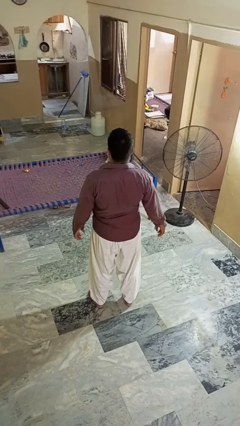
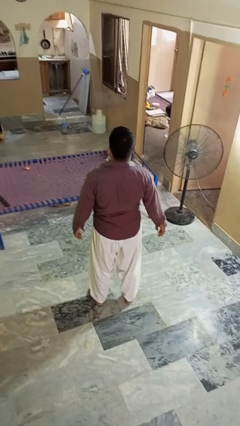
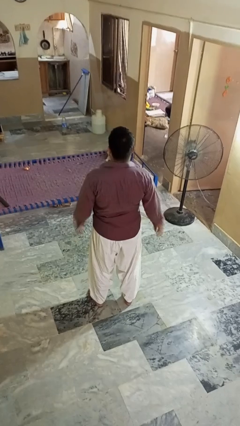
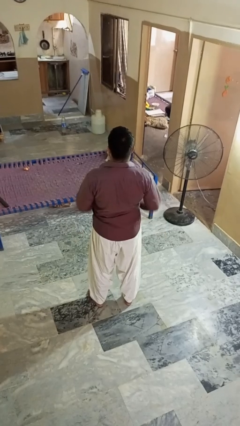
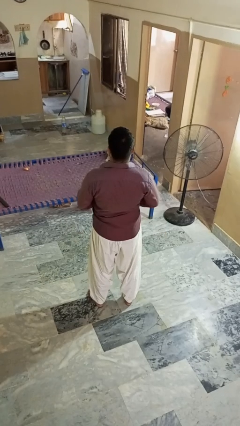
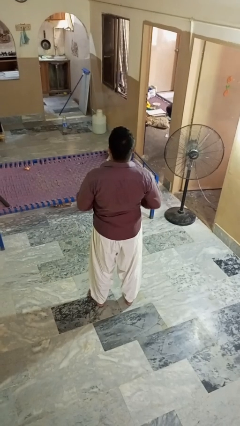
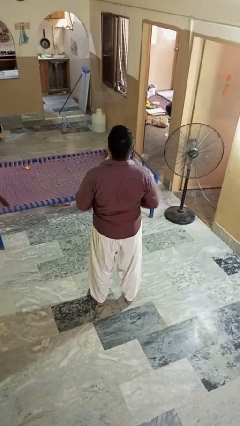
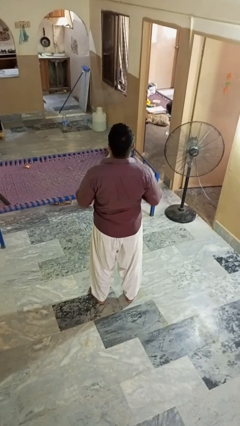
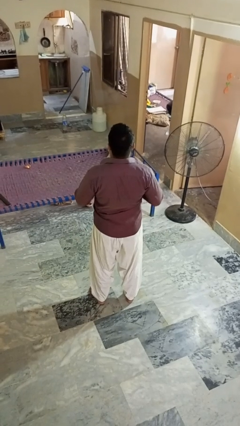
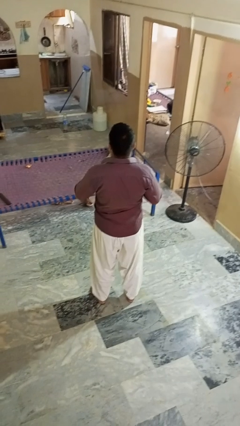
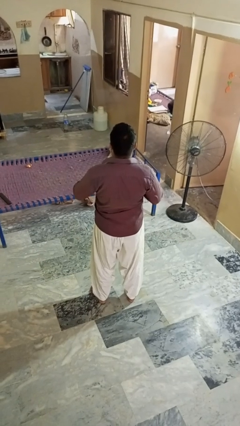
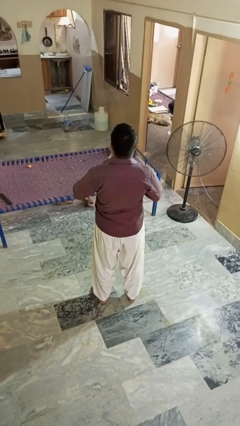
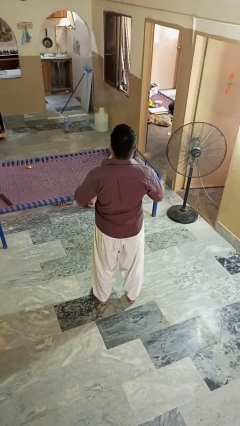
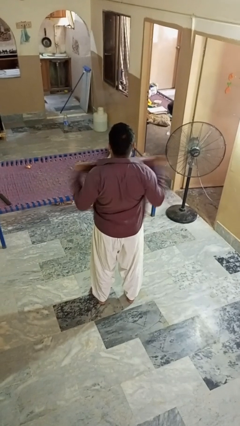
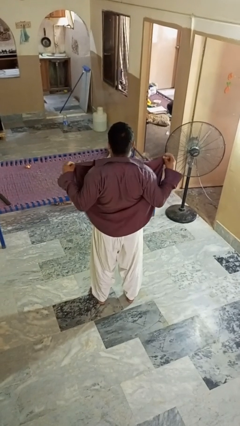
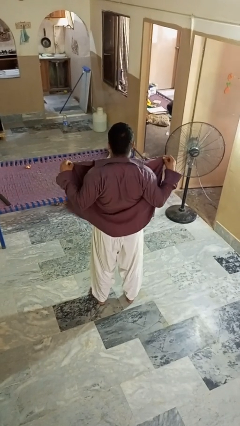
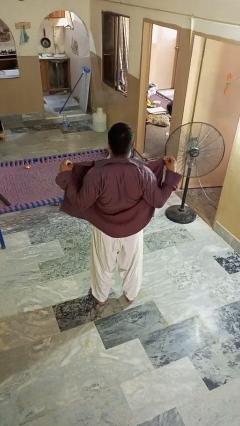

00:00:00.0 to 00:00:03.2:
person unbuttons shirt

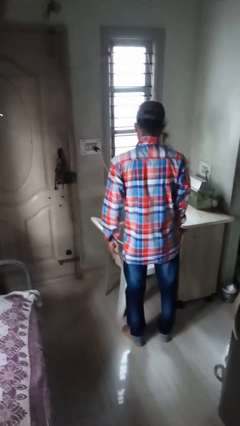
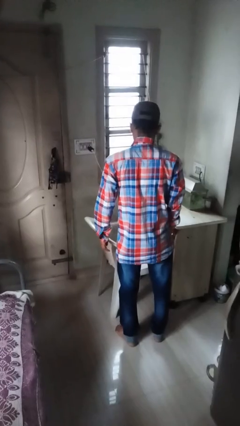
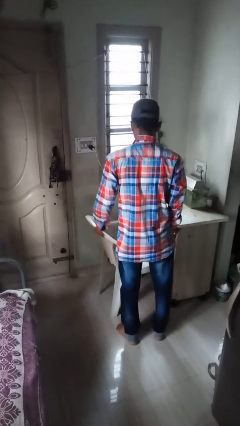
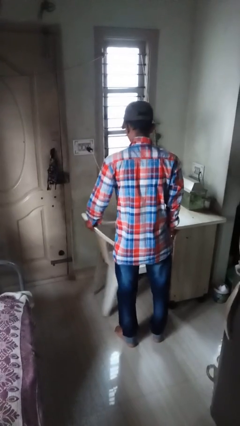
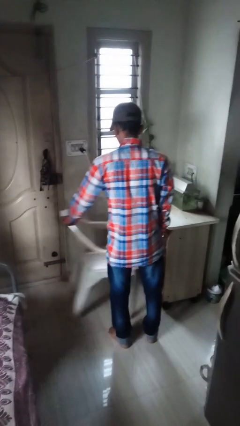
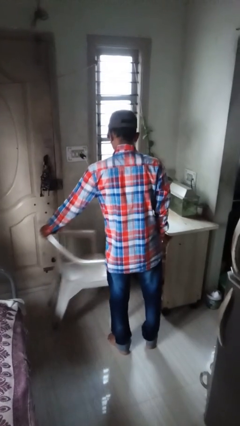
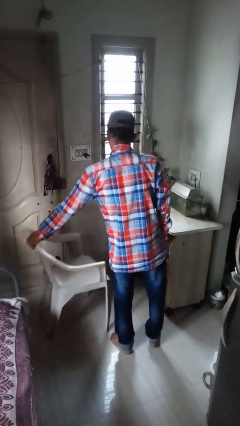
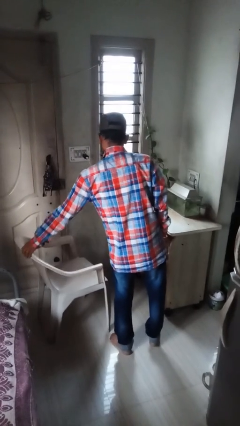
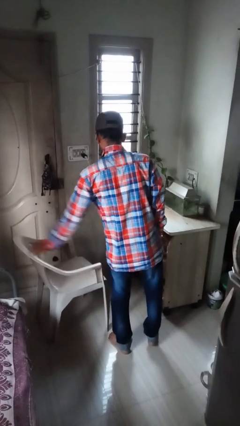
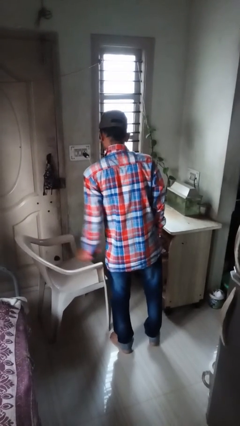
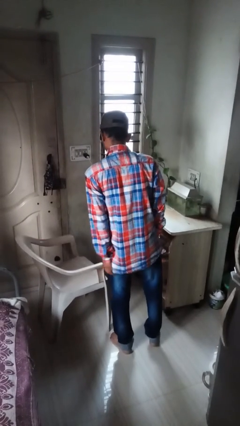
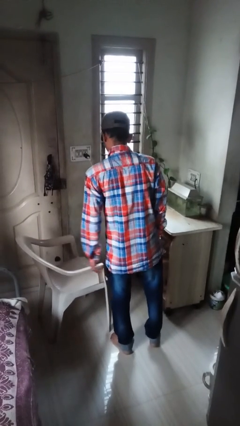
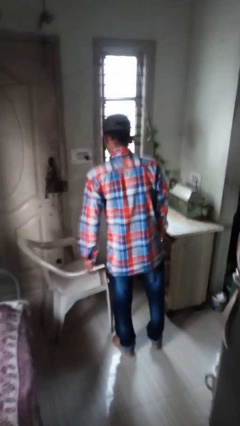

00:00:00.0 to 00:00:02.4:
person pulls out chair

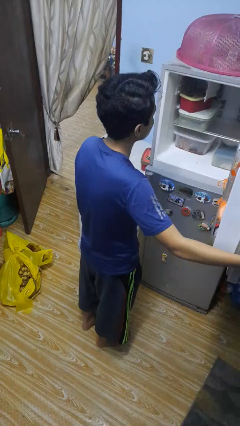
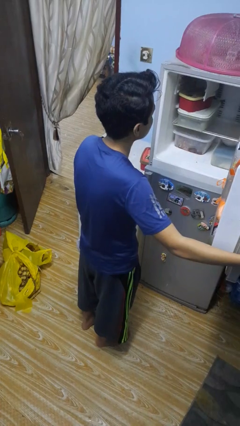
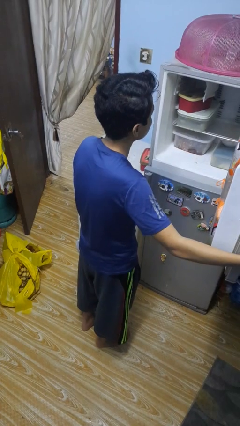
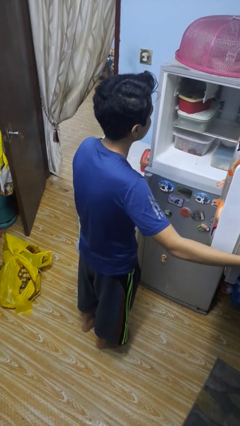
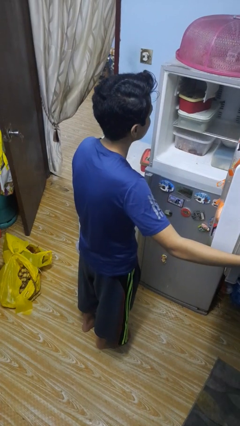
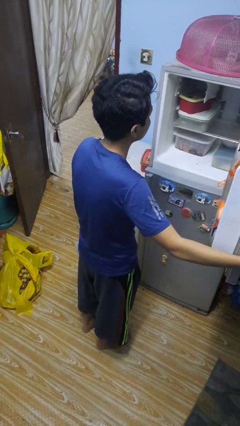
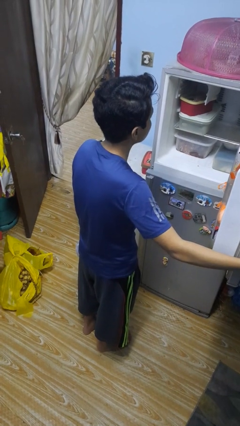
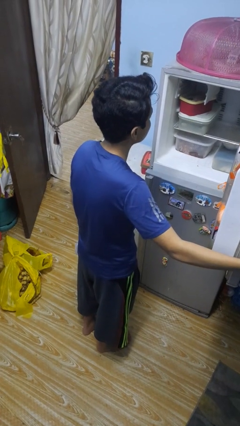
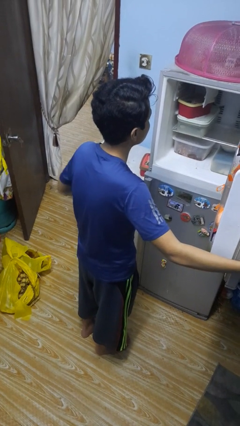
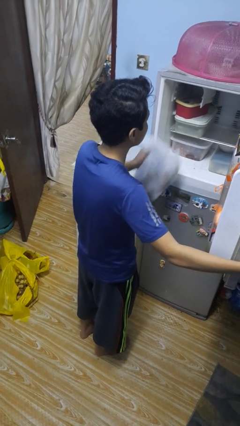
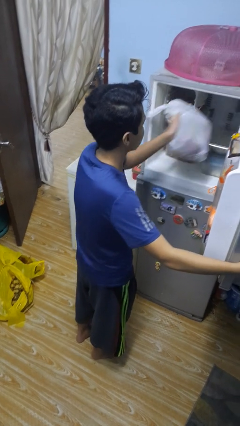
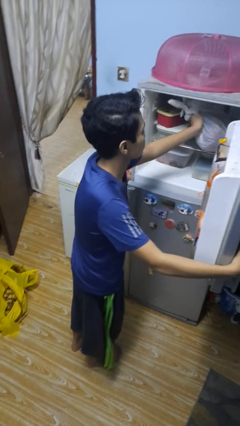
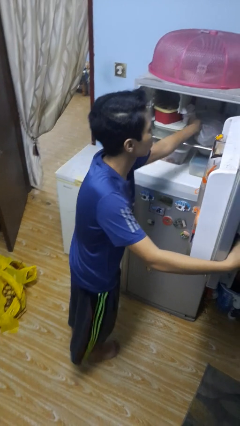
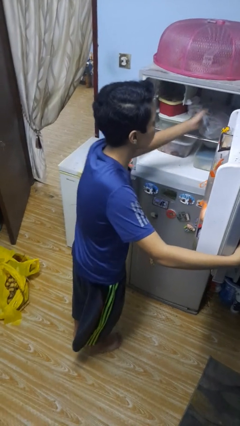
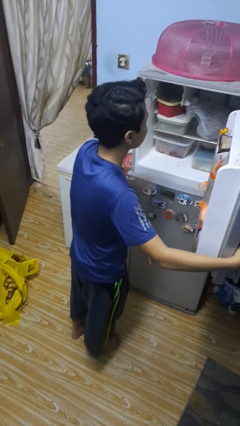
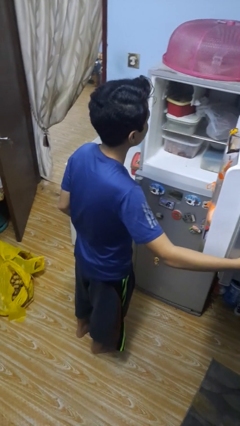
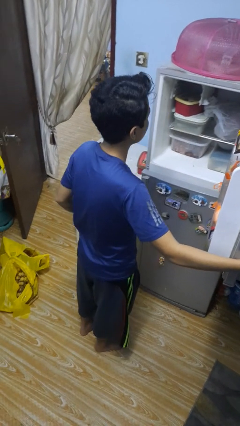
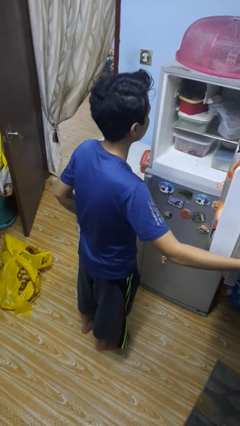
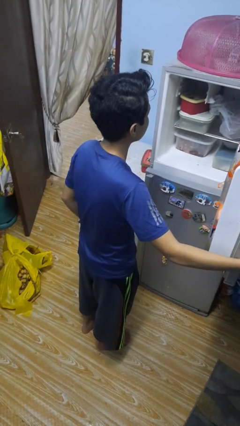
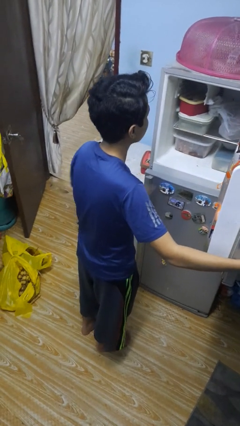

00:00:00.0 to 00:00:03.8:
person loads groceries into refrigerator

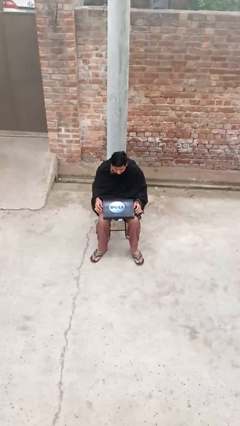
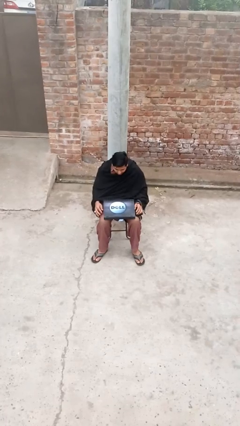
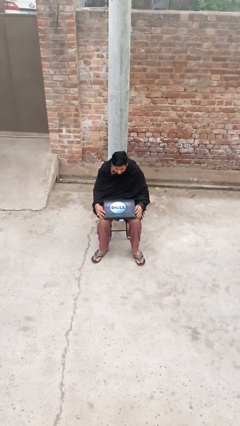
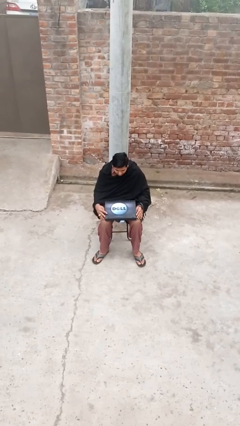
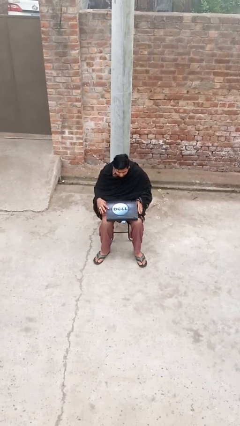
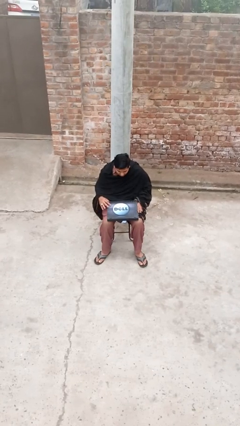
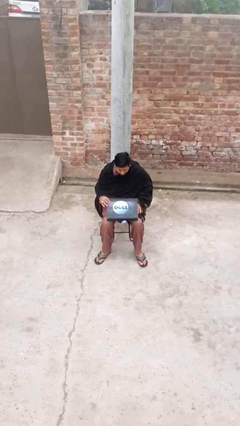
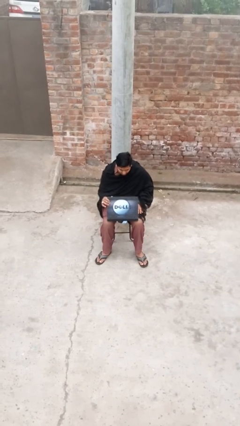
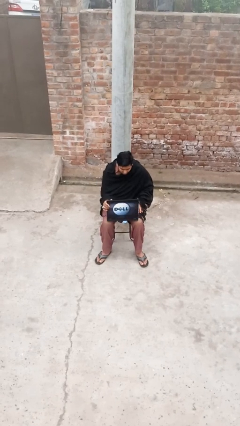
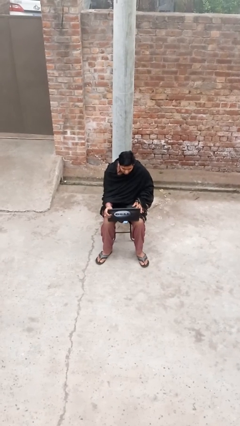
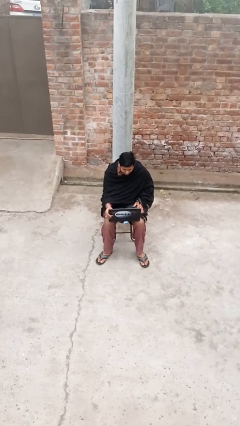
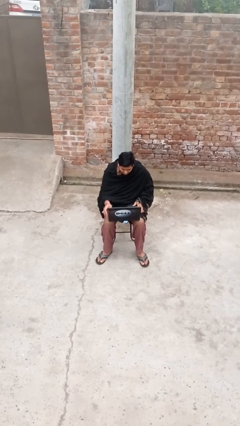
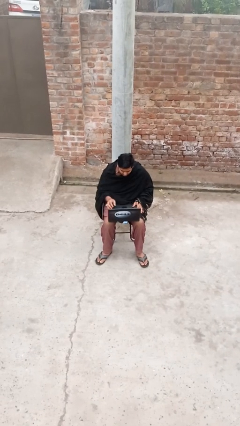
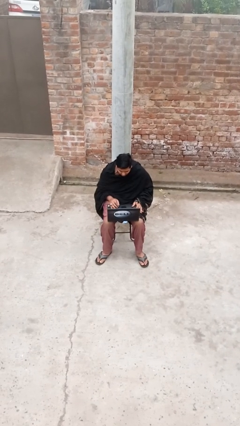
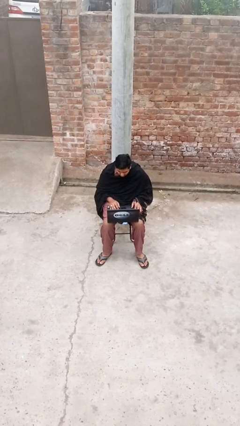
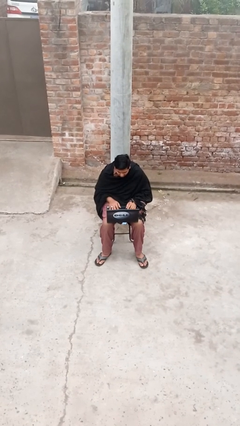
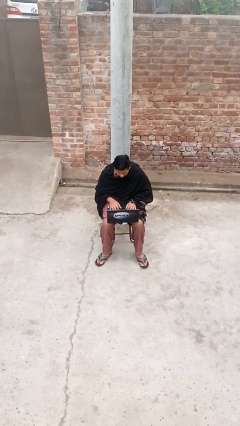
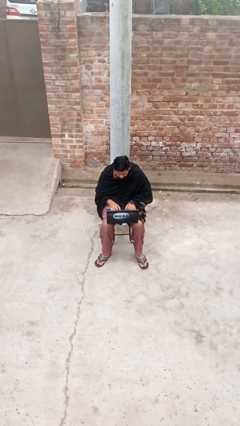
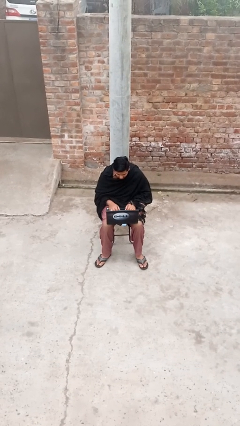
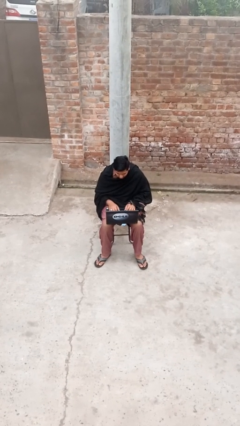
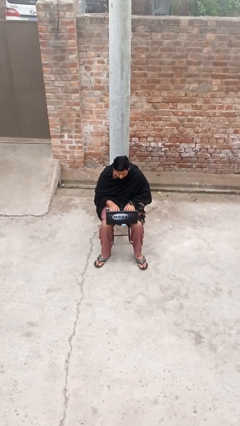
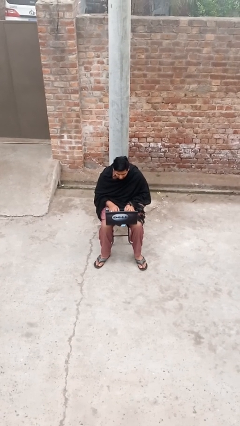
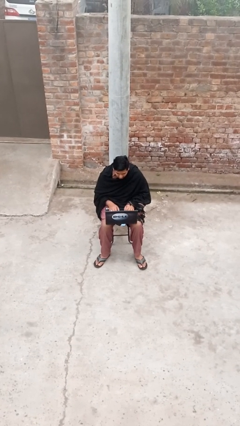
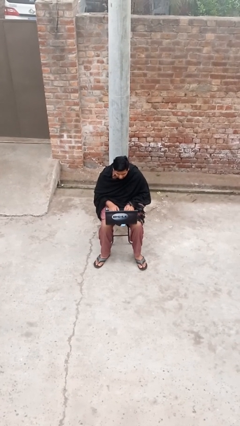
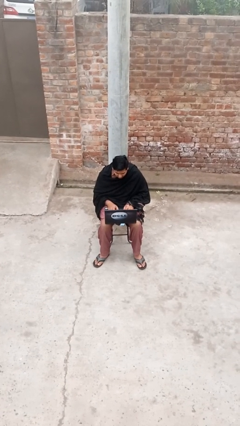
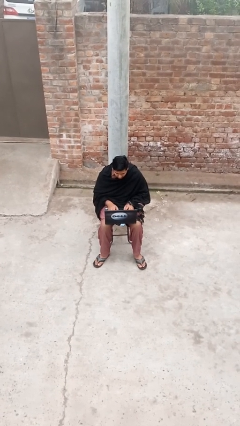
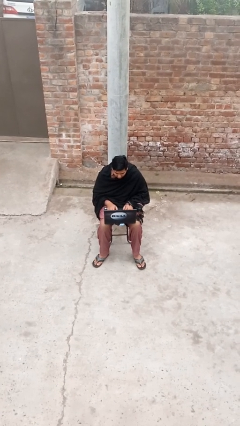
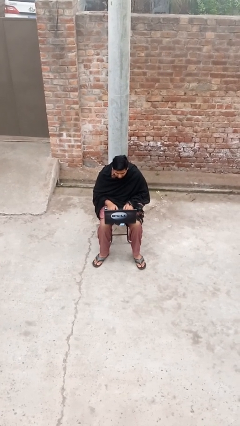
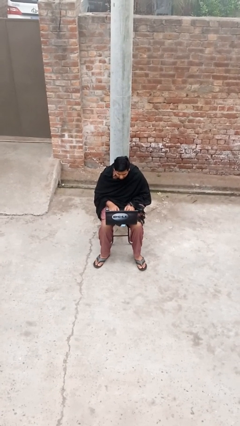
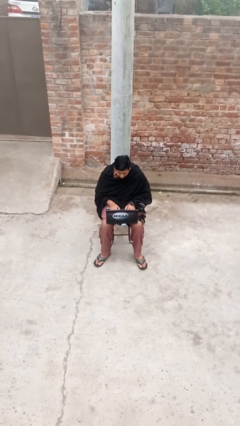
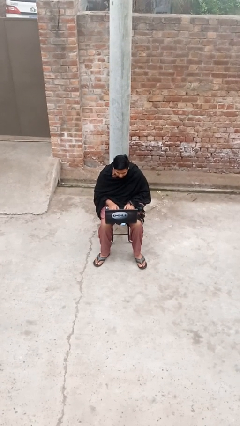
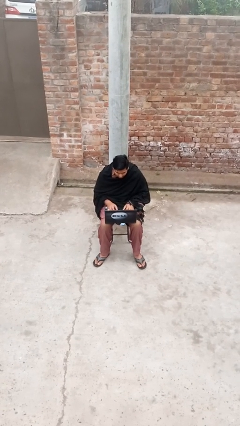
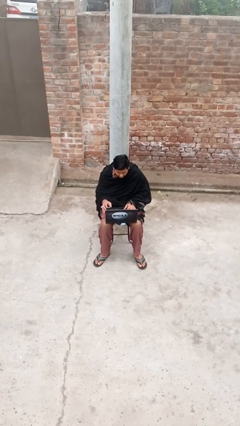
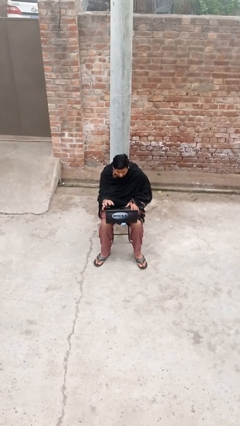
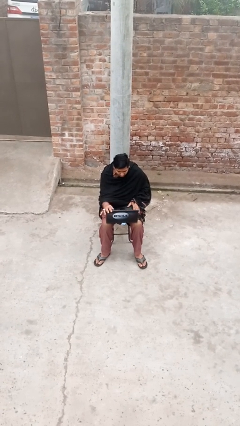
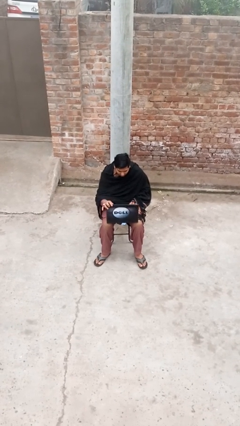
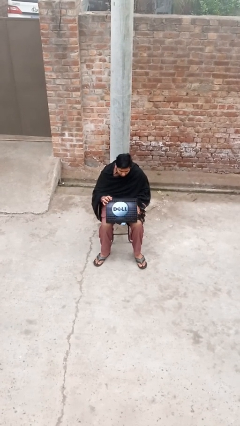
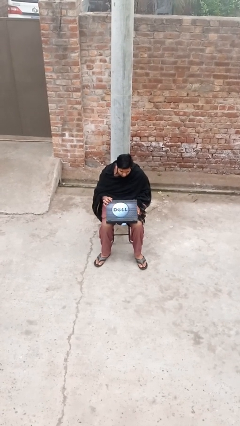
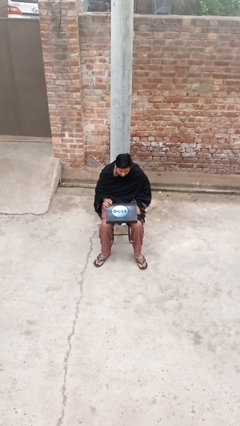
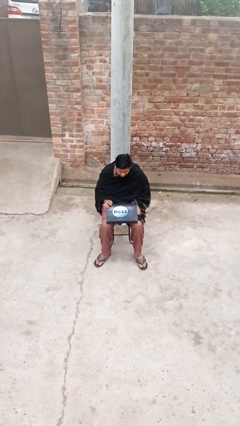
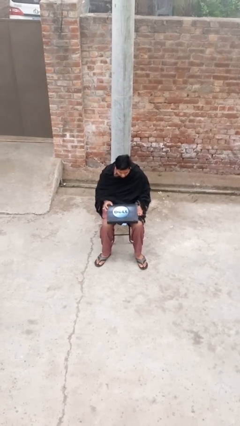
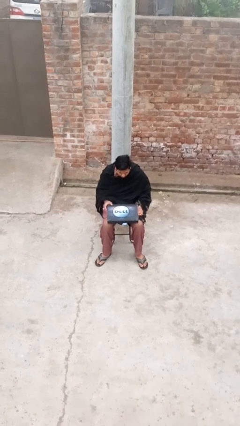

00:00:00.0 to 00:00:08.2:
person interacts with laptop

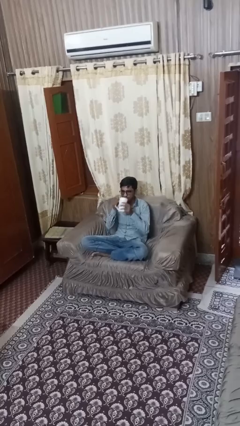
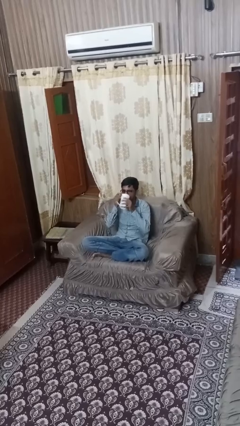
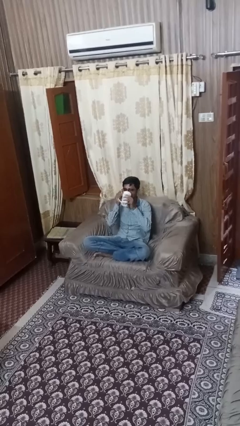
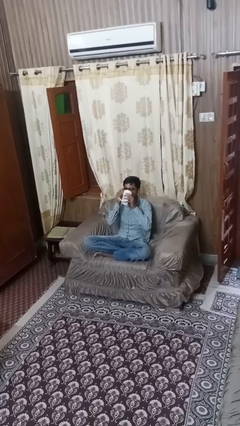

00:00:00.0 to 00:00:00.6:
person drinks from mug
